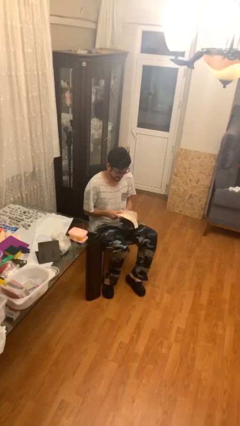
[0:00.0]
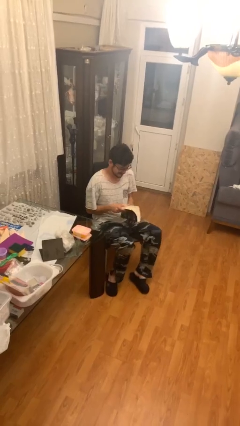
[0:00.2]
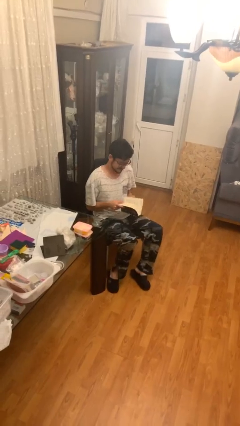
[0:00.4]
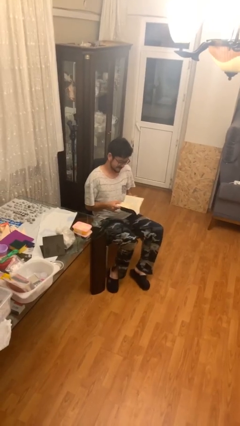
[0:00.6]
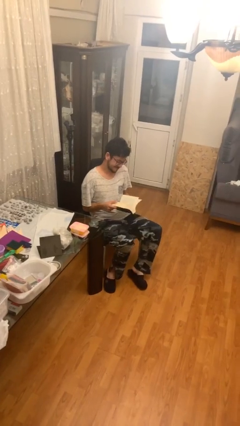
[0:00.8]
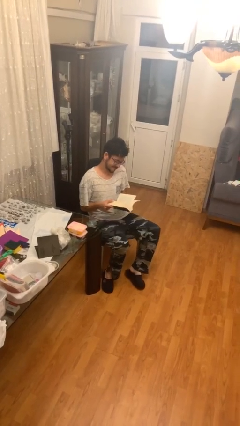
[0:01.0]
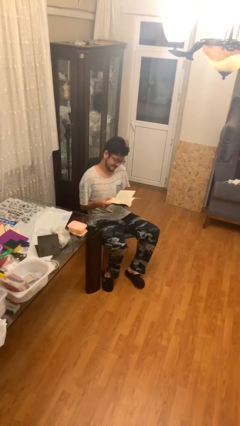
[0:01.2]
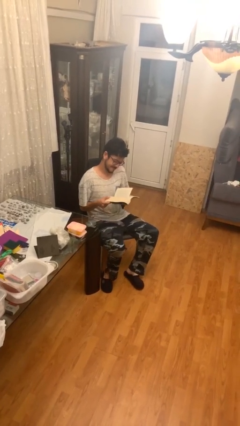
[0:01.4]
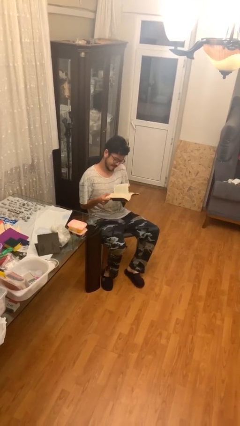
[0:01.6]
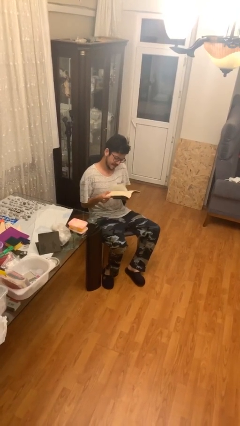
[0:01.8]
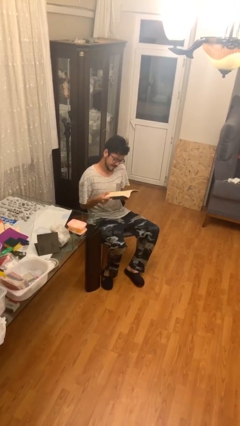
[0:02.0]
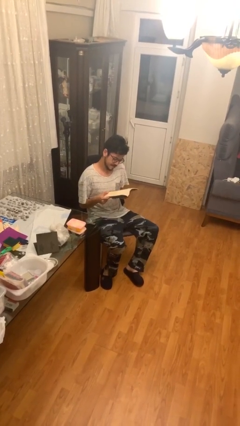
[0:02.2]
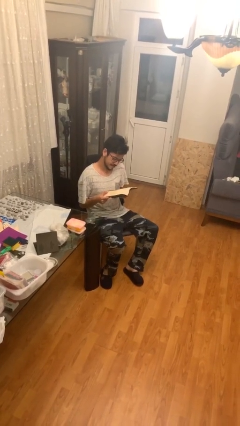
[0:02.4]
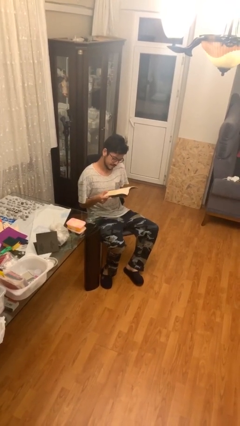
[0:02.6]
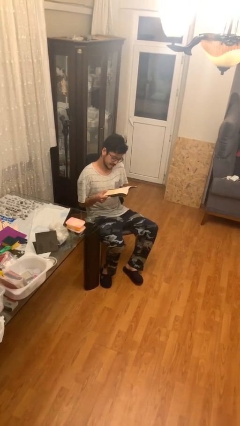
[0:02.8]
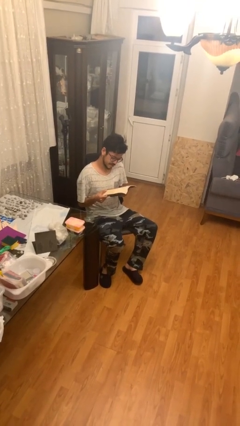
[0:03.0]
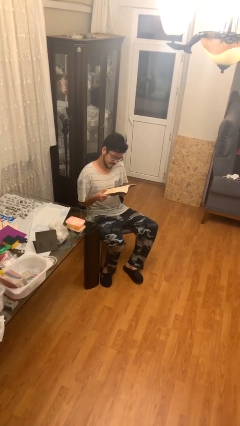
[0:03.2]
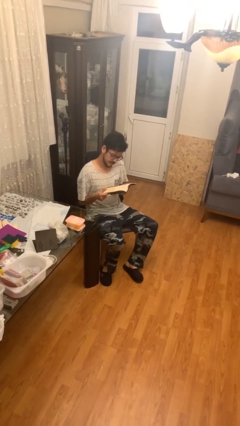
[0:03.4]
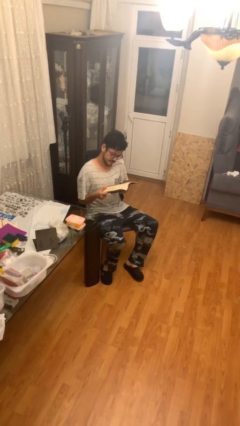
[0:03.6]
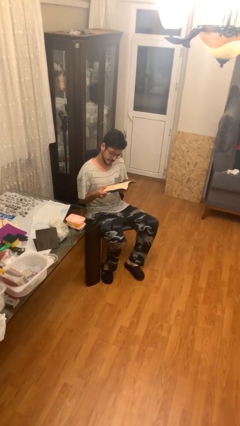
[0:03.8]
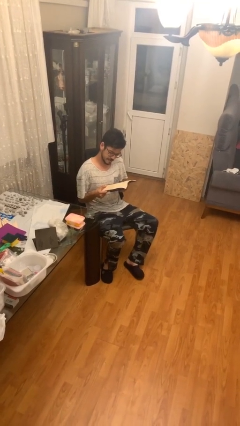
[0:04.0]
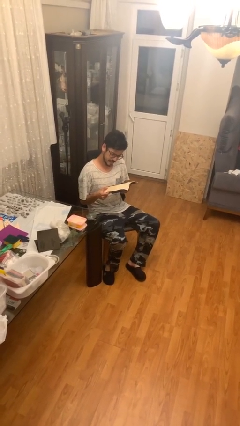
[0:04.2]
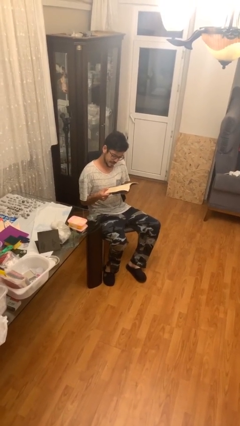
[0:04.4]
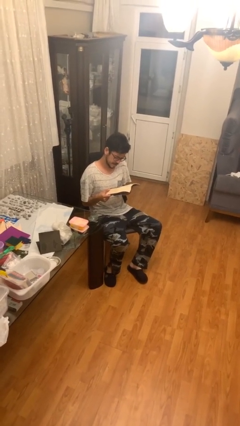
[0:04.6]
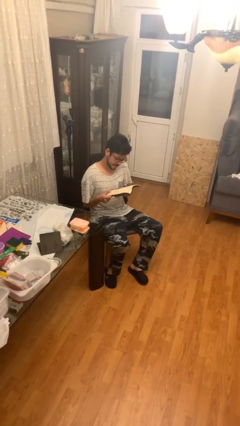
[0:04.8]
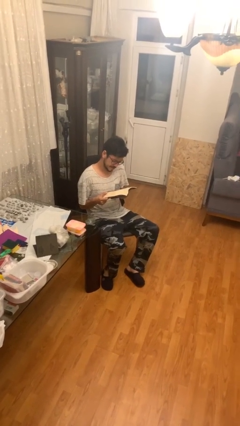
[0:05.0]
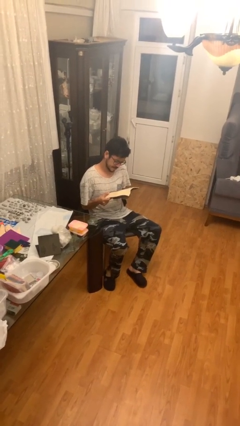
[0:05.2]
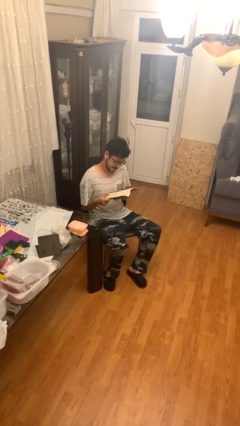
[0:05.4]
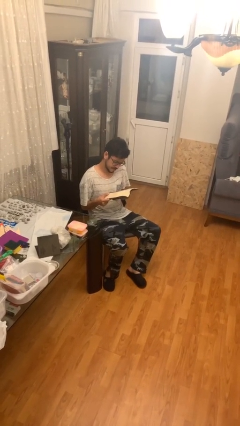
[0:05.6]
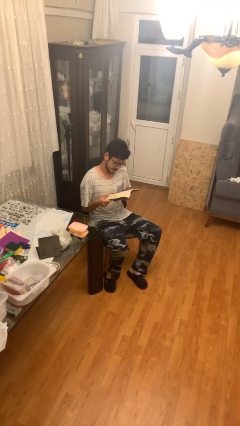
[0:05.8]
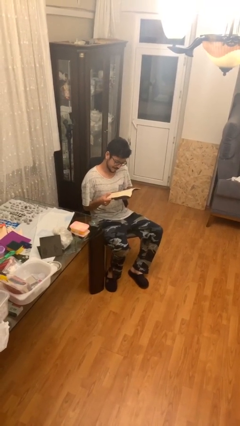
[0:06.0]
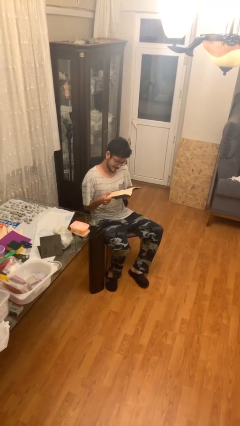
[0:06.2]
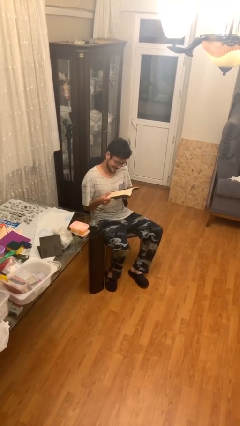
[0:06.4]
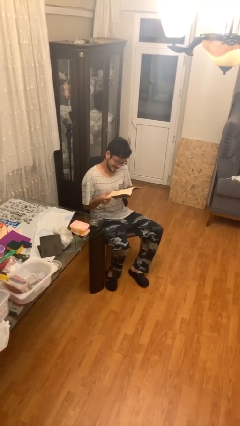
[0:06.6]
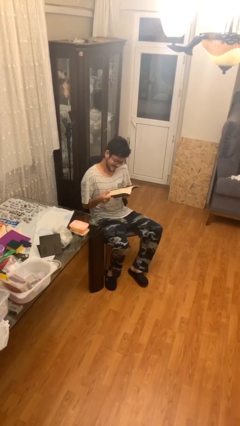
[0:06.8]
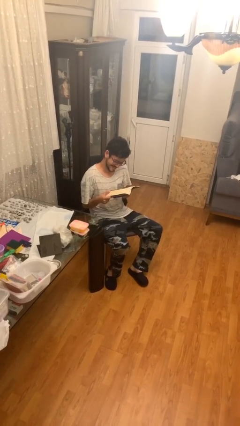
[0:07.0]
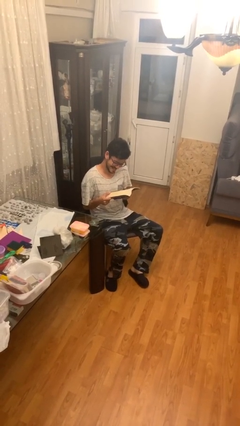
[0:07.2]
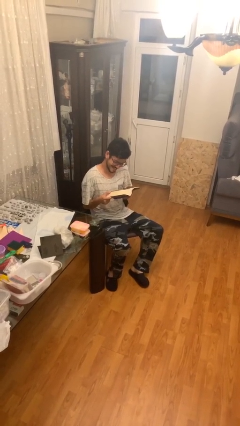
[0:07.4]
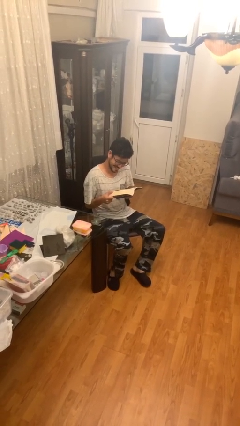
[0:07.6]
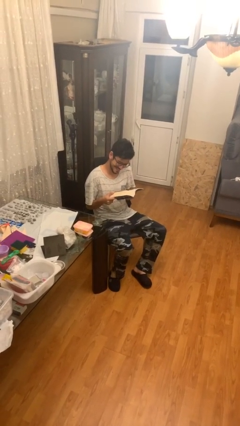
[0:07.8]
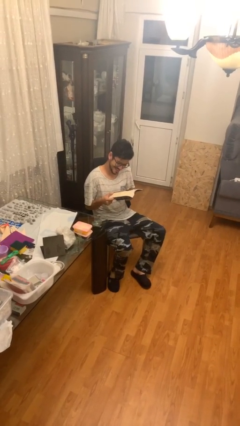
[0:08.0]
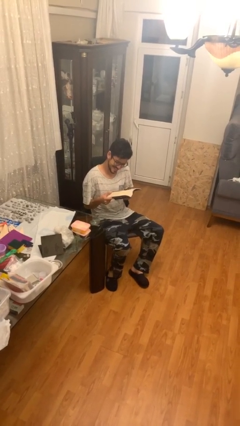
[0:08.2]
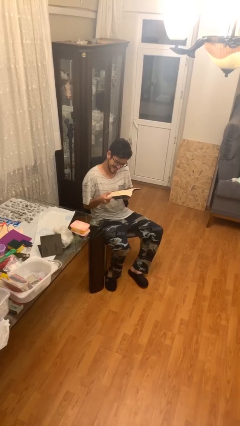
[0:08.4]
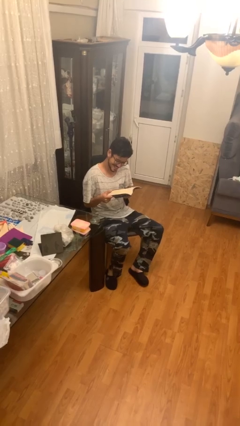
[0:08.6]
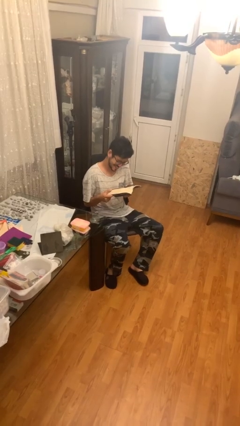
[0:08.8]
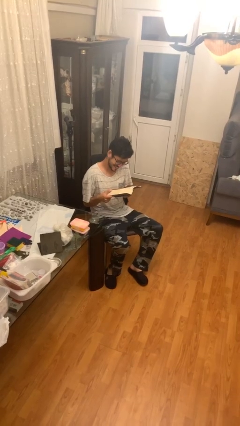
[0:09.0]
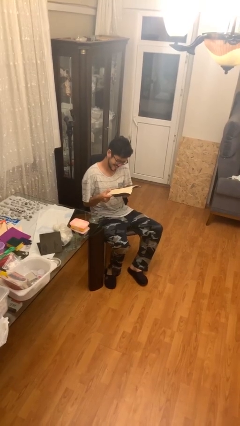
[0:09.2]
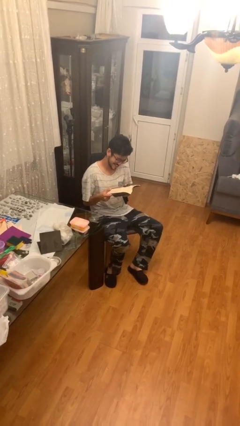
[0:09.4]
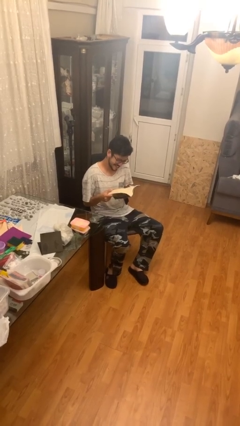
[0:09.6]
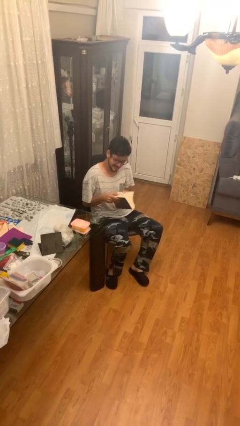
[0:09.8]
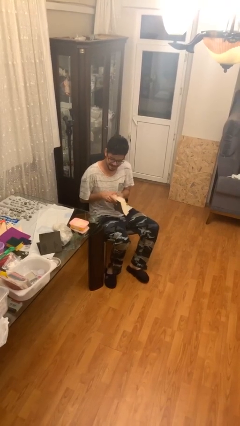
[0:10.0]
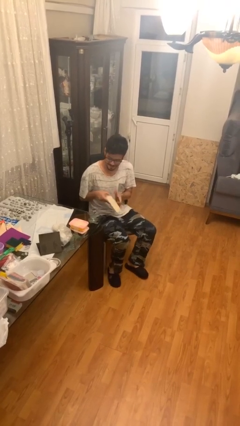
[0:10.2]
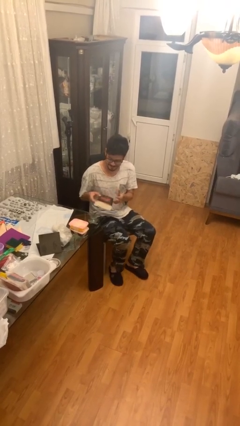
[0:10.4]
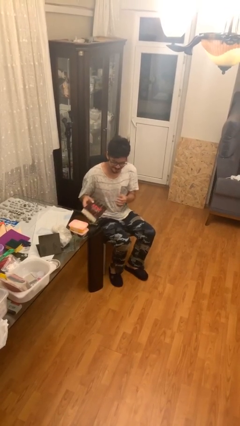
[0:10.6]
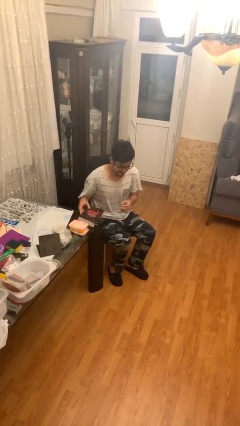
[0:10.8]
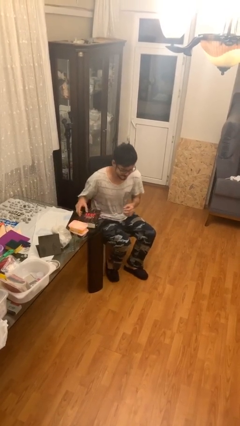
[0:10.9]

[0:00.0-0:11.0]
person reads document

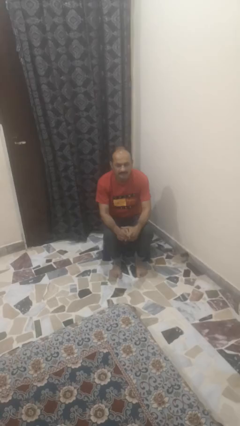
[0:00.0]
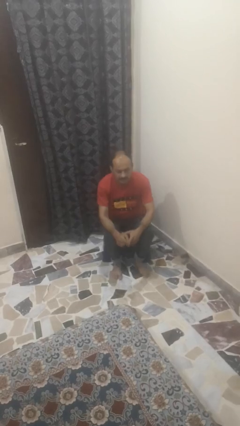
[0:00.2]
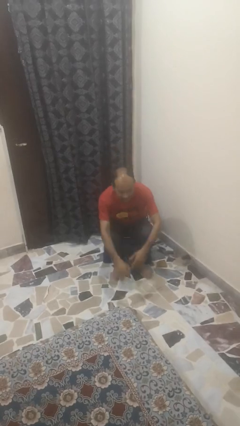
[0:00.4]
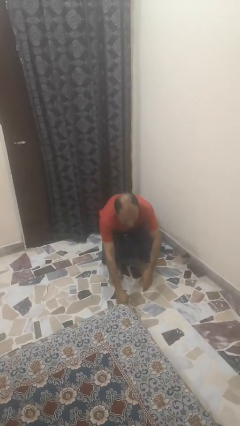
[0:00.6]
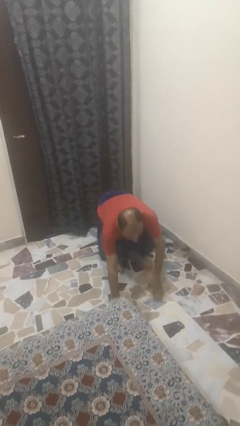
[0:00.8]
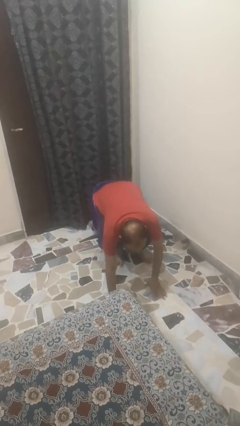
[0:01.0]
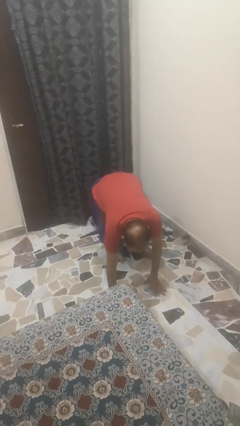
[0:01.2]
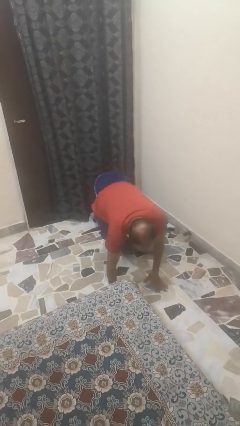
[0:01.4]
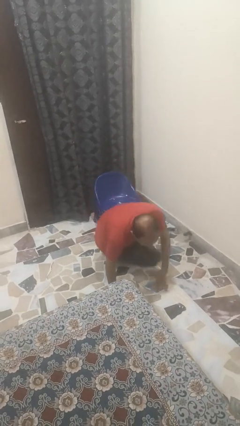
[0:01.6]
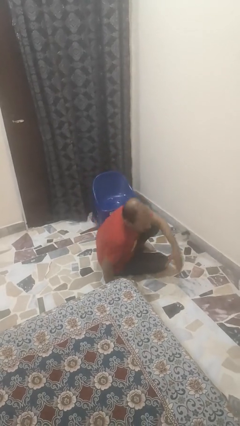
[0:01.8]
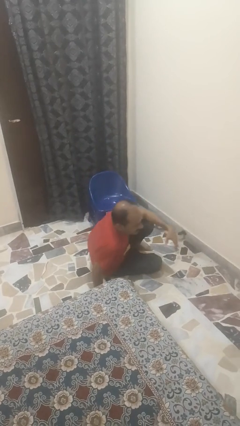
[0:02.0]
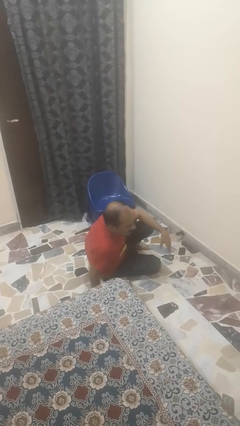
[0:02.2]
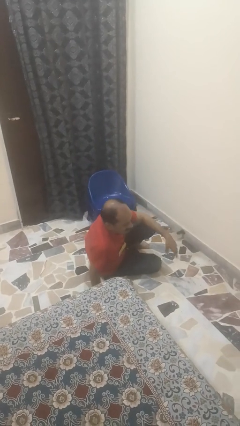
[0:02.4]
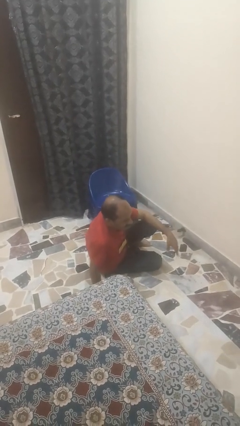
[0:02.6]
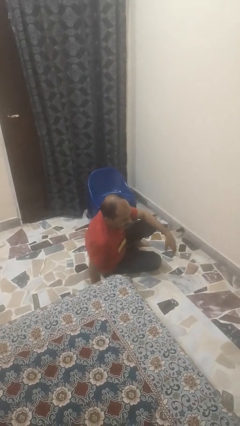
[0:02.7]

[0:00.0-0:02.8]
person falls from chair

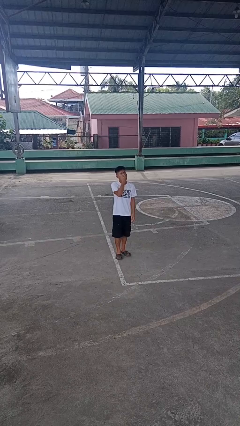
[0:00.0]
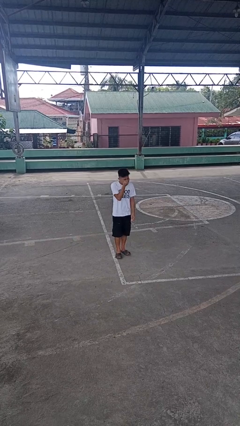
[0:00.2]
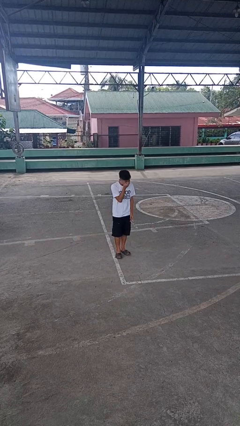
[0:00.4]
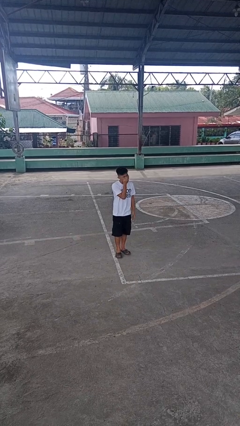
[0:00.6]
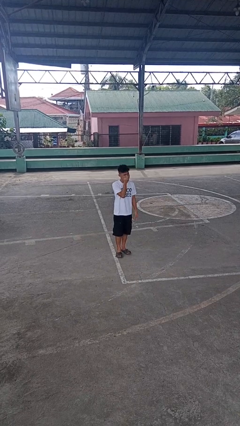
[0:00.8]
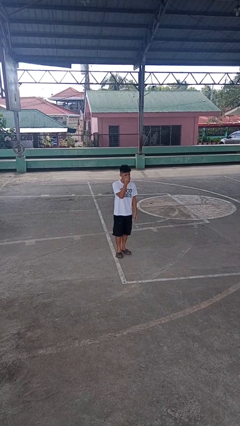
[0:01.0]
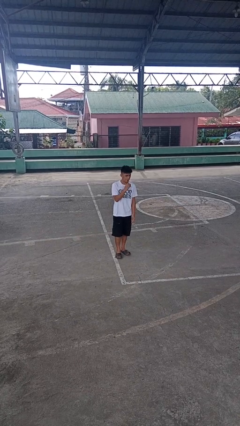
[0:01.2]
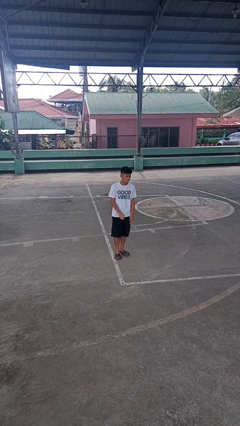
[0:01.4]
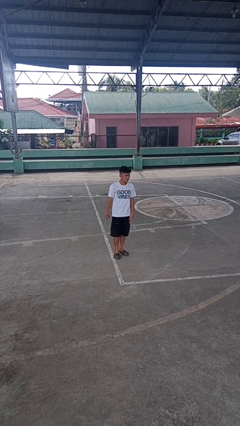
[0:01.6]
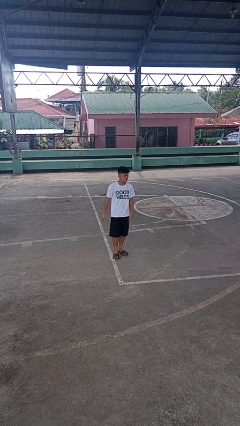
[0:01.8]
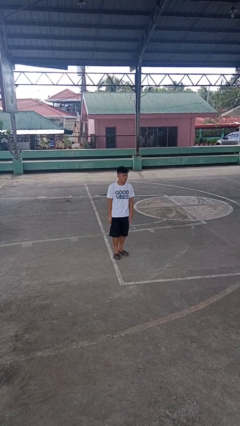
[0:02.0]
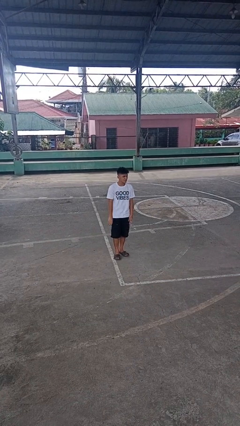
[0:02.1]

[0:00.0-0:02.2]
person sneezes into hand

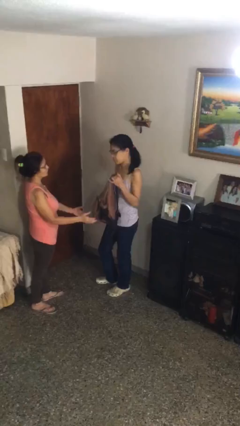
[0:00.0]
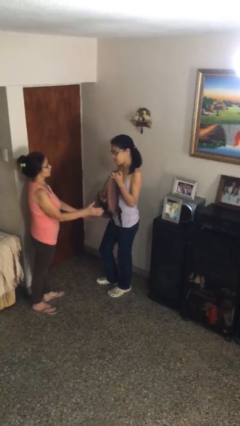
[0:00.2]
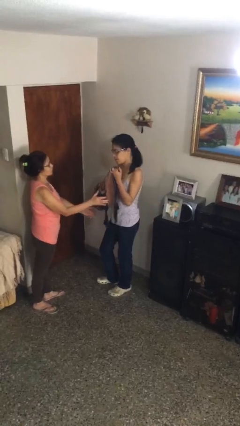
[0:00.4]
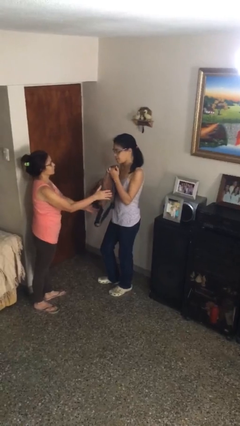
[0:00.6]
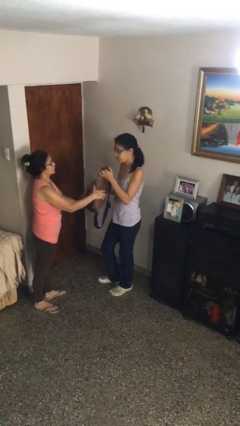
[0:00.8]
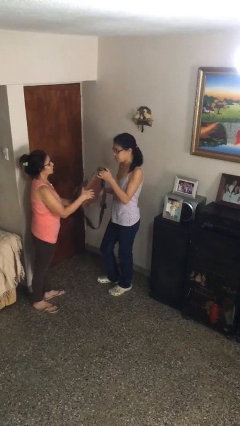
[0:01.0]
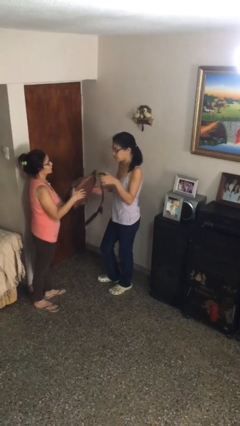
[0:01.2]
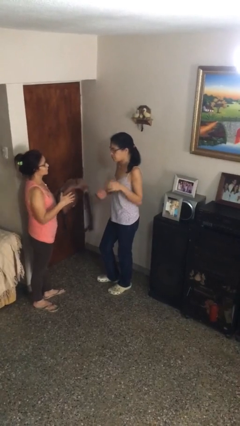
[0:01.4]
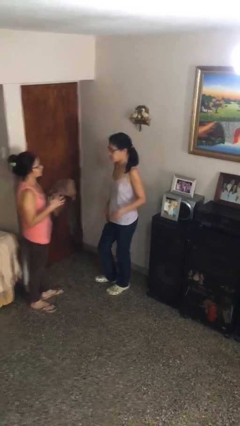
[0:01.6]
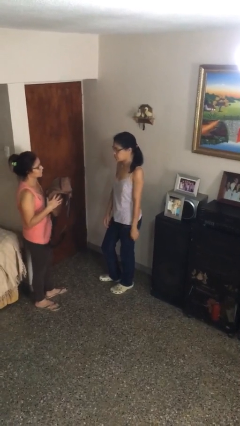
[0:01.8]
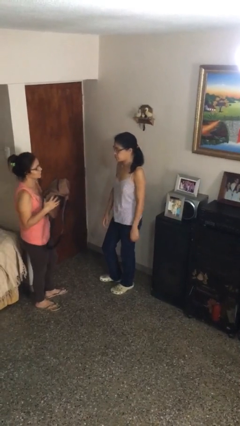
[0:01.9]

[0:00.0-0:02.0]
person transfers object to person
